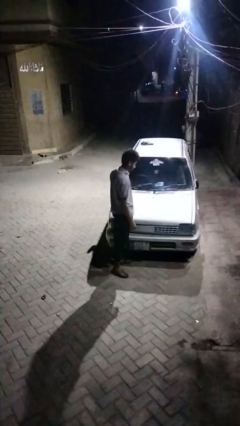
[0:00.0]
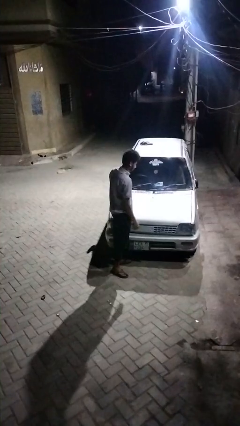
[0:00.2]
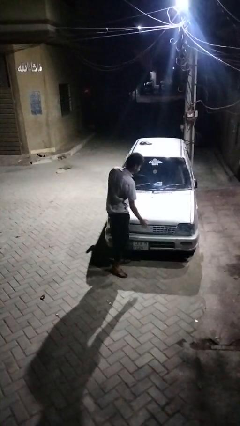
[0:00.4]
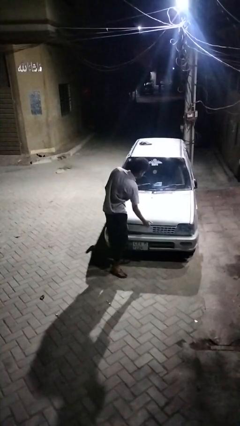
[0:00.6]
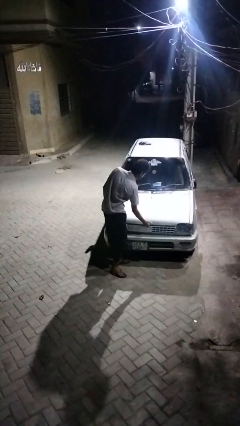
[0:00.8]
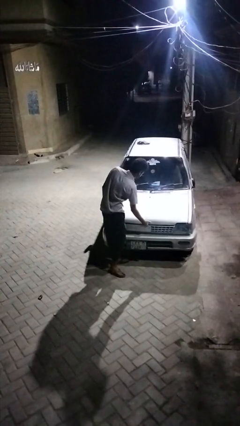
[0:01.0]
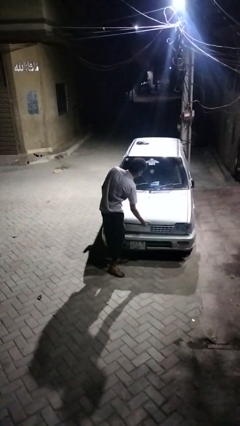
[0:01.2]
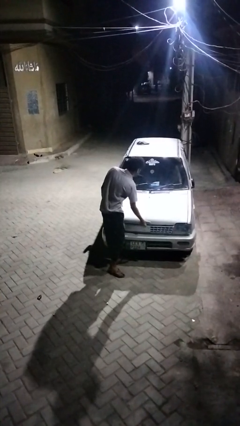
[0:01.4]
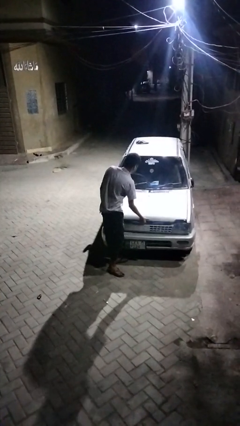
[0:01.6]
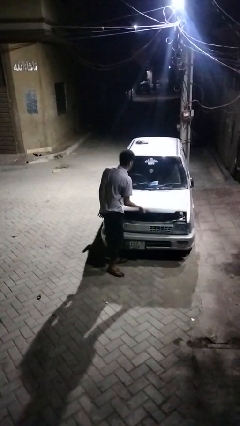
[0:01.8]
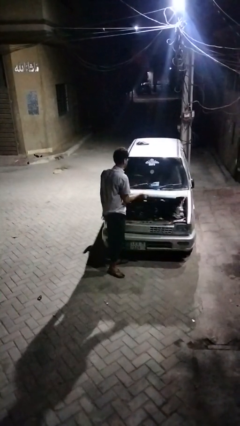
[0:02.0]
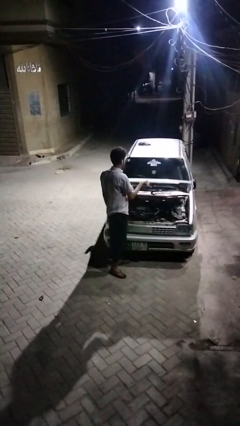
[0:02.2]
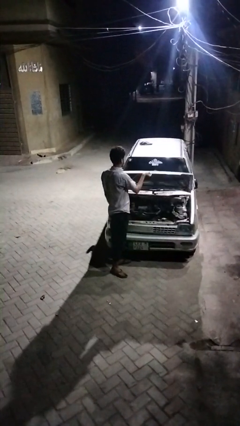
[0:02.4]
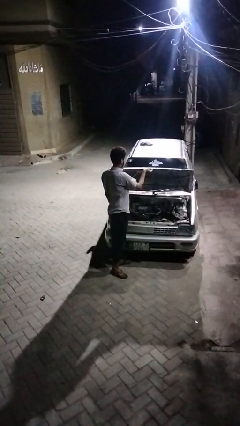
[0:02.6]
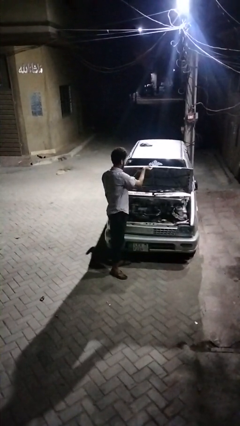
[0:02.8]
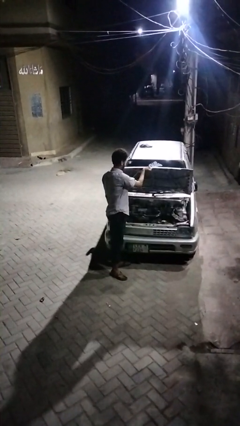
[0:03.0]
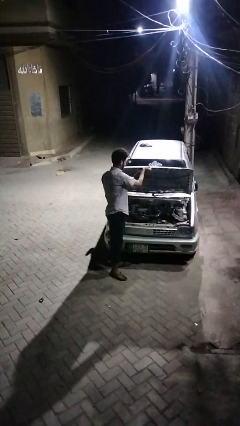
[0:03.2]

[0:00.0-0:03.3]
person opens car hood

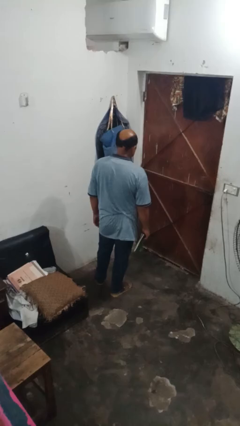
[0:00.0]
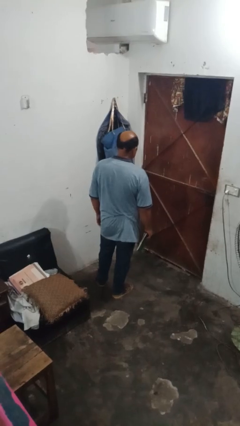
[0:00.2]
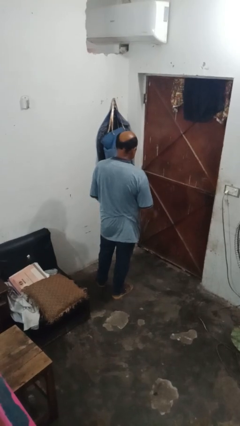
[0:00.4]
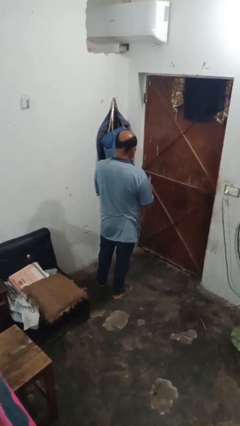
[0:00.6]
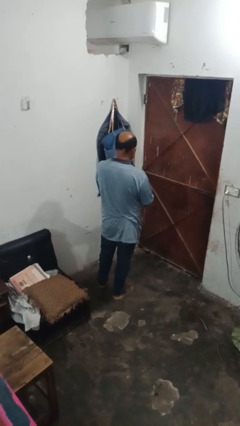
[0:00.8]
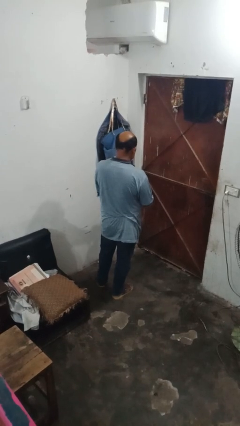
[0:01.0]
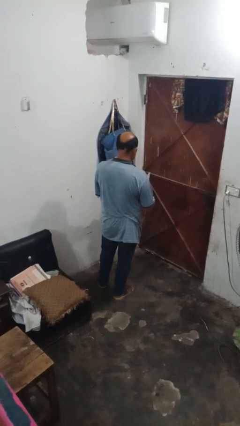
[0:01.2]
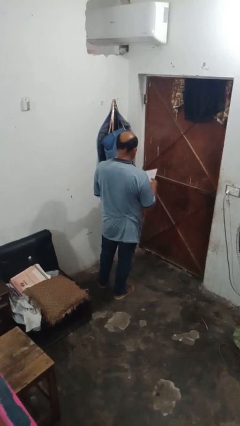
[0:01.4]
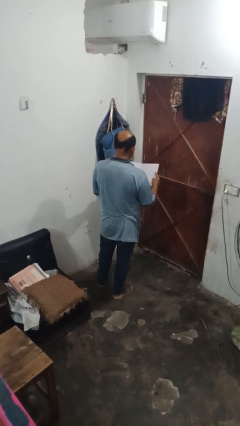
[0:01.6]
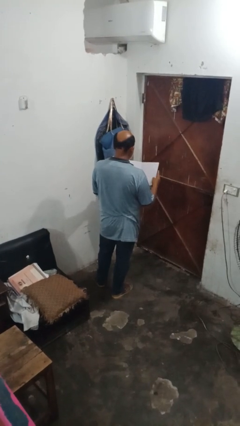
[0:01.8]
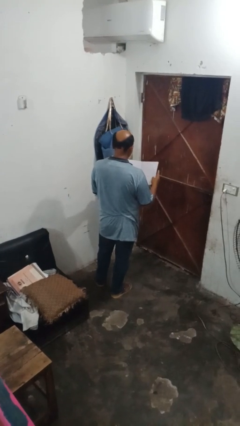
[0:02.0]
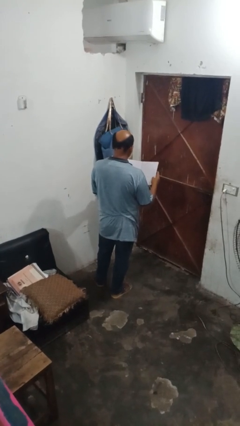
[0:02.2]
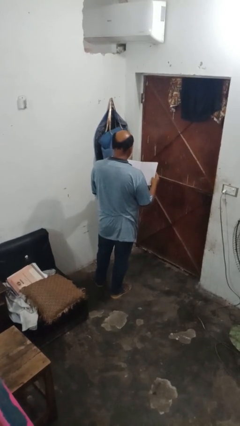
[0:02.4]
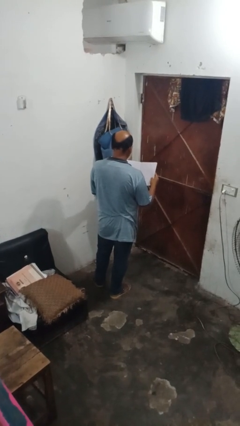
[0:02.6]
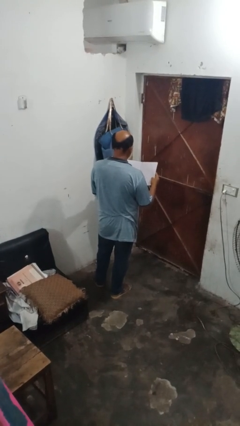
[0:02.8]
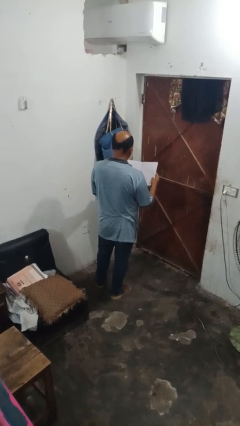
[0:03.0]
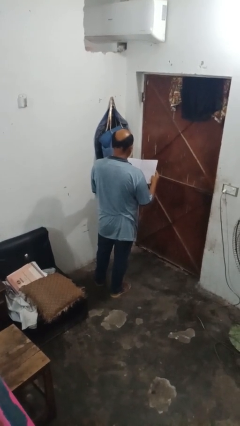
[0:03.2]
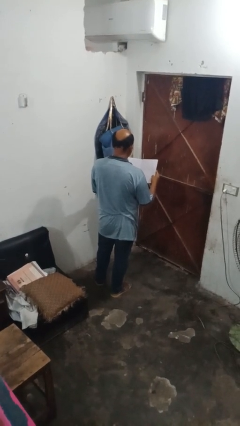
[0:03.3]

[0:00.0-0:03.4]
person reads book

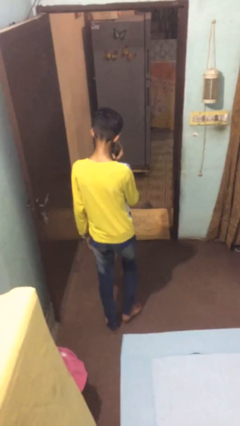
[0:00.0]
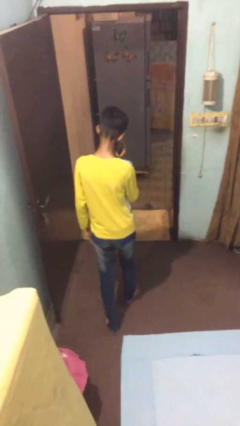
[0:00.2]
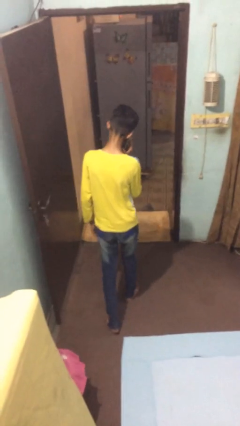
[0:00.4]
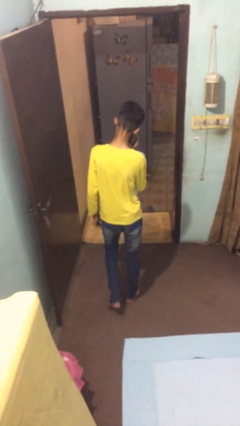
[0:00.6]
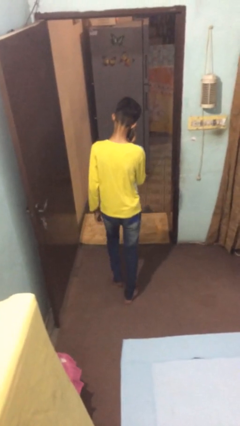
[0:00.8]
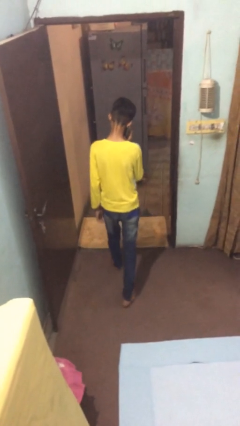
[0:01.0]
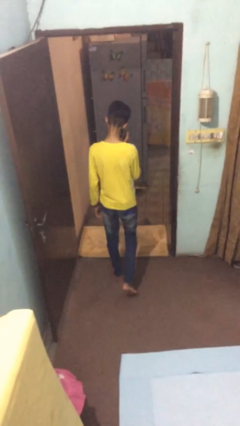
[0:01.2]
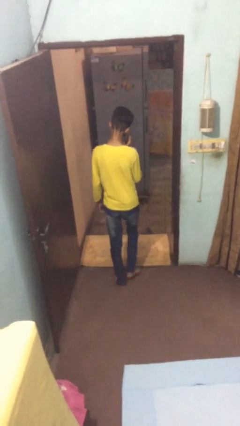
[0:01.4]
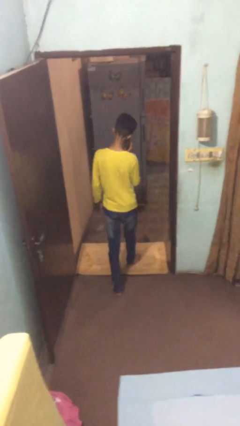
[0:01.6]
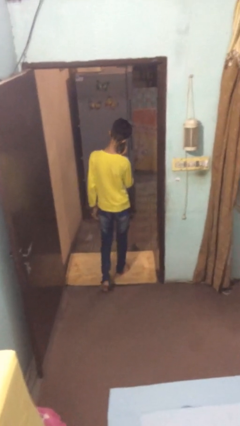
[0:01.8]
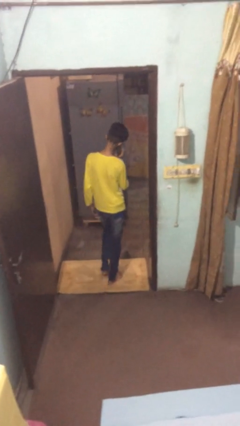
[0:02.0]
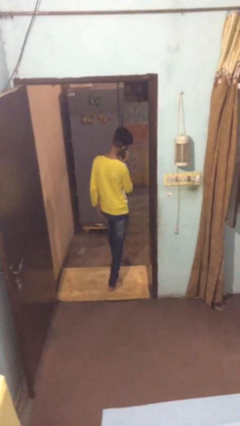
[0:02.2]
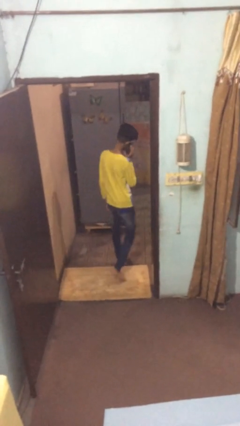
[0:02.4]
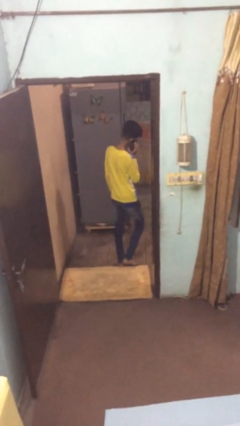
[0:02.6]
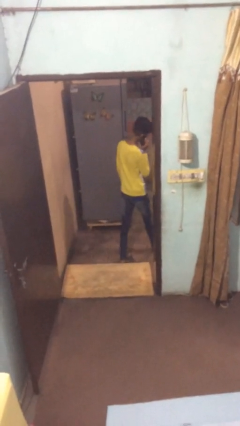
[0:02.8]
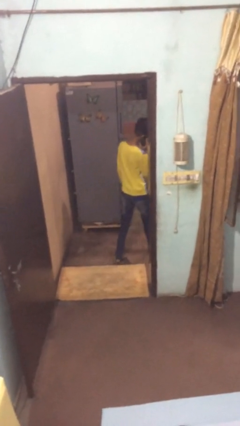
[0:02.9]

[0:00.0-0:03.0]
person exits scene through structure

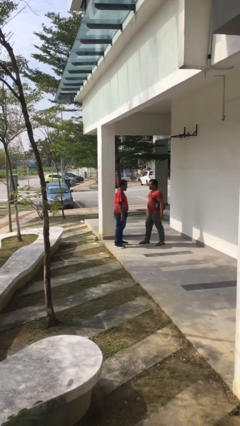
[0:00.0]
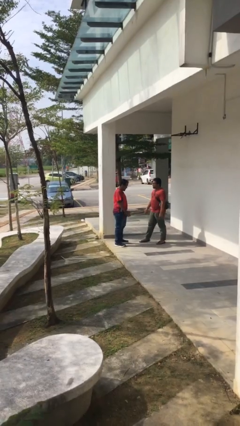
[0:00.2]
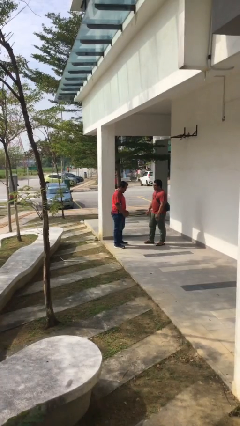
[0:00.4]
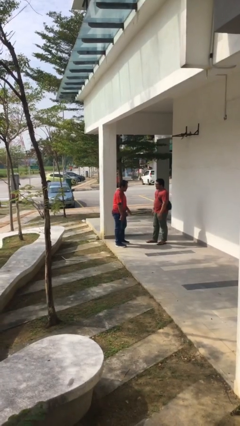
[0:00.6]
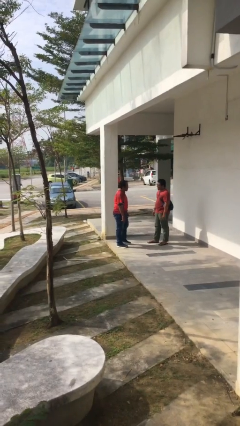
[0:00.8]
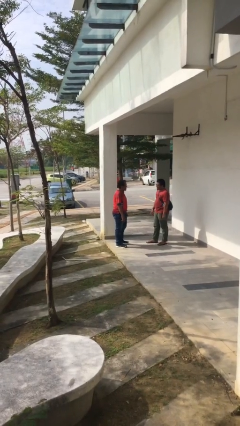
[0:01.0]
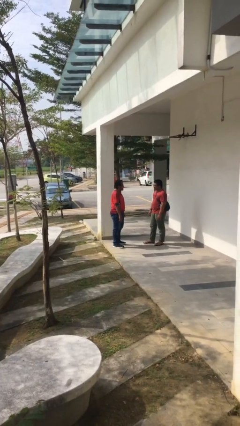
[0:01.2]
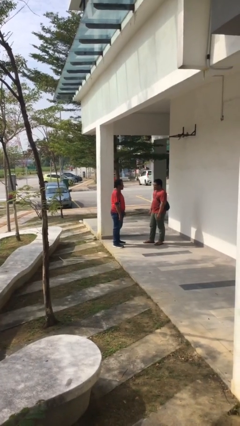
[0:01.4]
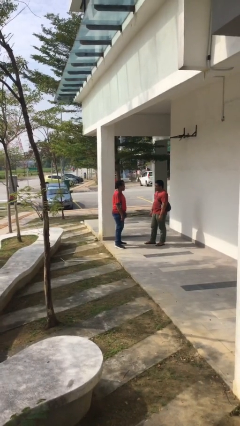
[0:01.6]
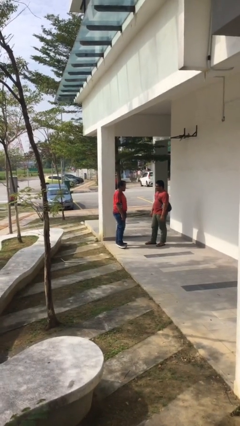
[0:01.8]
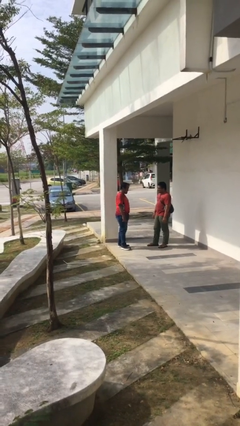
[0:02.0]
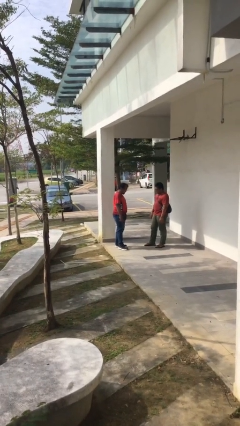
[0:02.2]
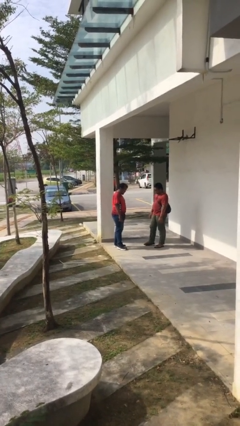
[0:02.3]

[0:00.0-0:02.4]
person talks to person

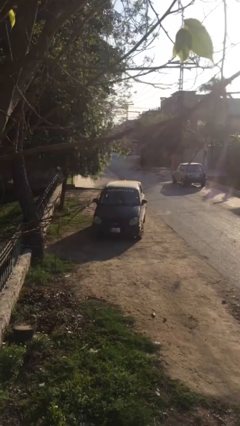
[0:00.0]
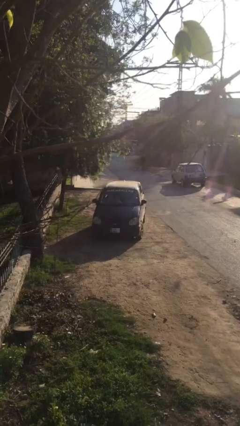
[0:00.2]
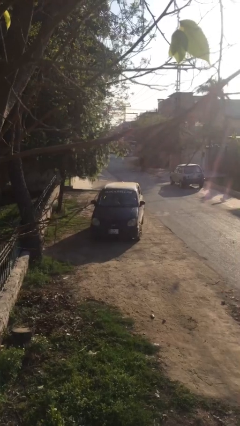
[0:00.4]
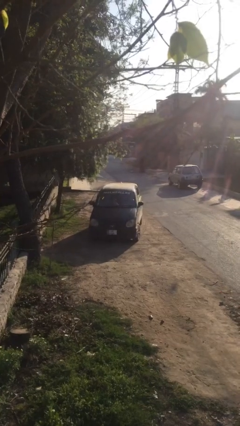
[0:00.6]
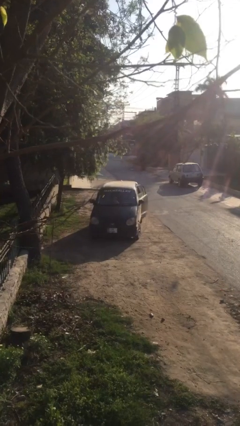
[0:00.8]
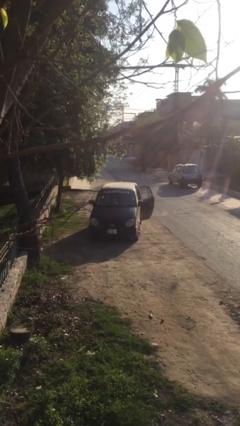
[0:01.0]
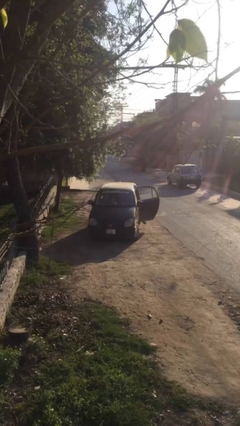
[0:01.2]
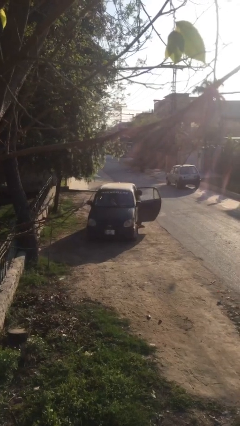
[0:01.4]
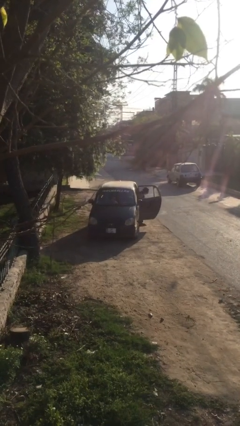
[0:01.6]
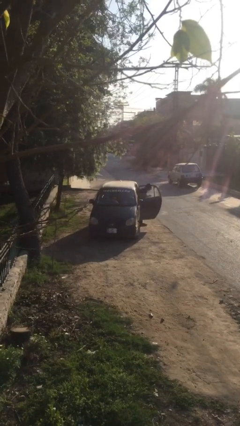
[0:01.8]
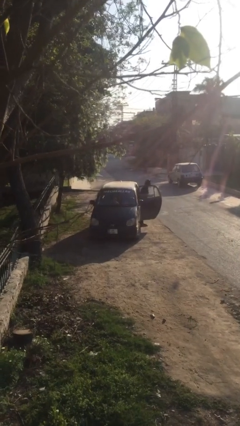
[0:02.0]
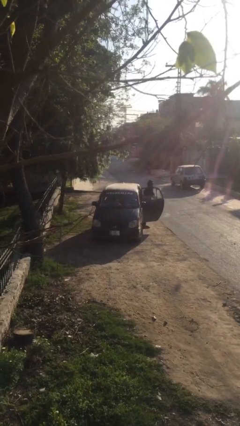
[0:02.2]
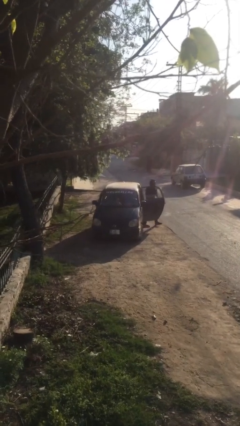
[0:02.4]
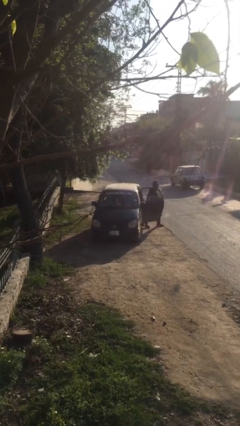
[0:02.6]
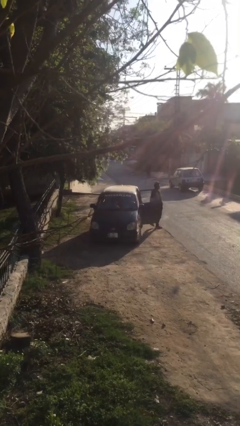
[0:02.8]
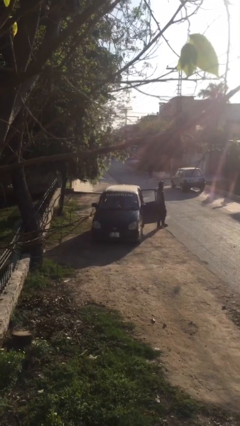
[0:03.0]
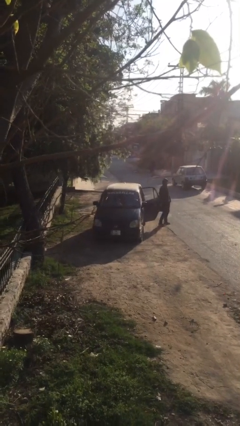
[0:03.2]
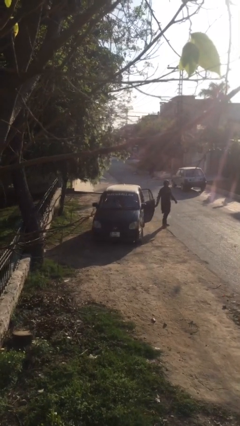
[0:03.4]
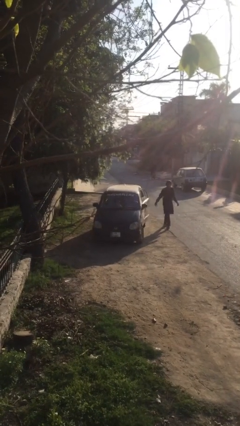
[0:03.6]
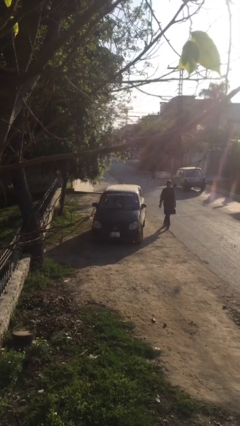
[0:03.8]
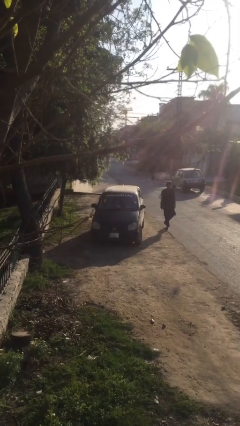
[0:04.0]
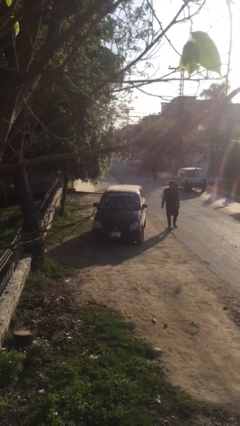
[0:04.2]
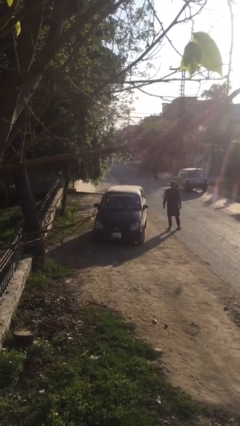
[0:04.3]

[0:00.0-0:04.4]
car drops off person

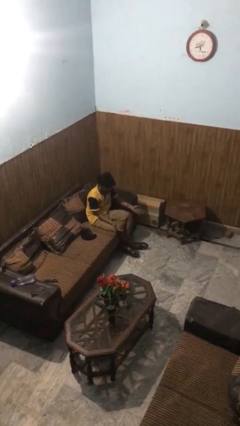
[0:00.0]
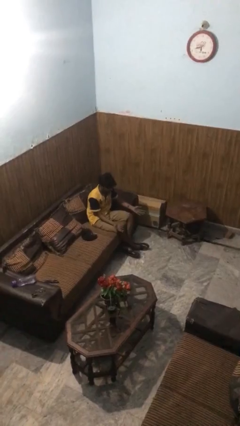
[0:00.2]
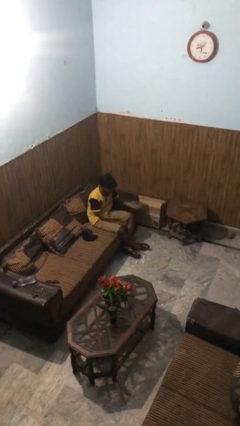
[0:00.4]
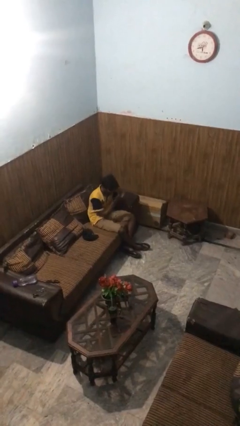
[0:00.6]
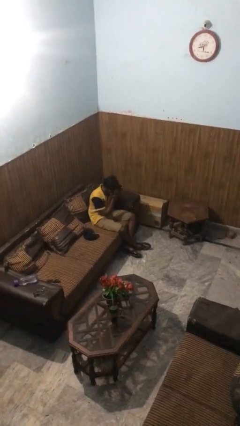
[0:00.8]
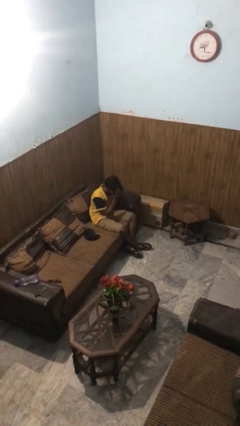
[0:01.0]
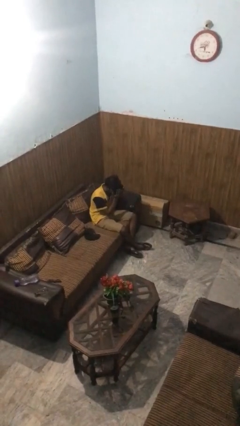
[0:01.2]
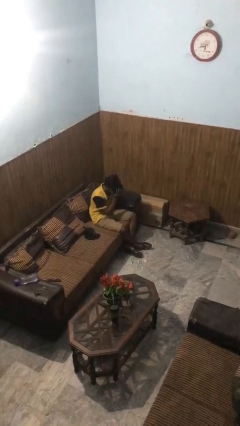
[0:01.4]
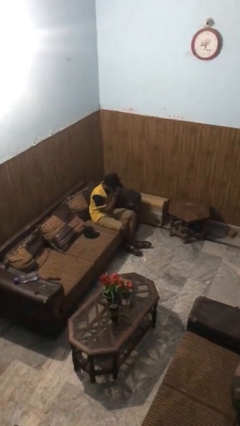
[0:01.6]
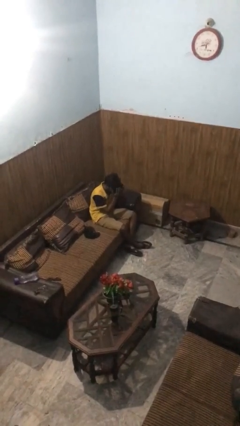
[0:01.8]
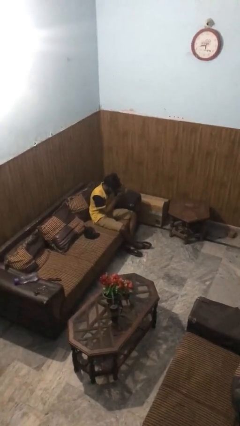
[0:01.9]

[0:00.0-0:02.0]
person covers face with hands
